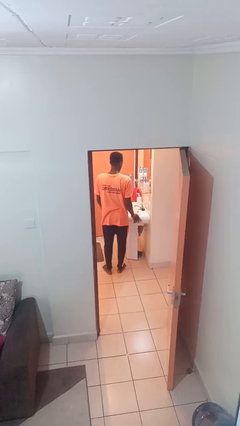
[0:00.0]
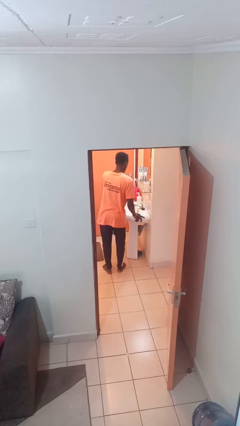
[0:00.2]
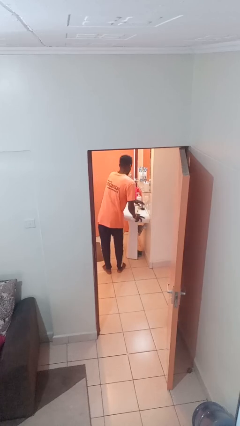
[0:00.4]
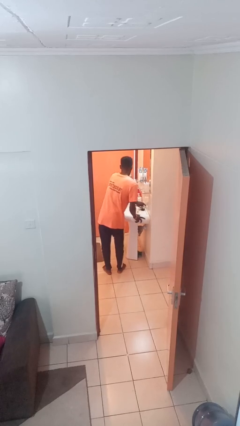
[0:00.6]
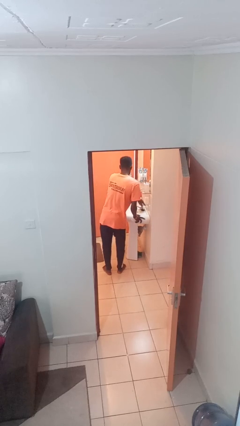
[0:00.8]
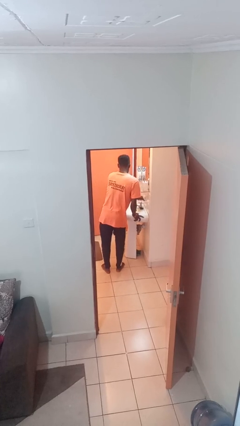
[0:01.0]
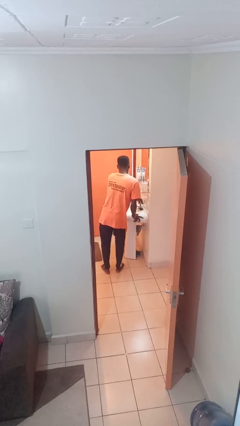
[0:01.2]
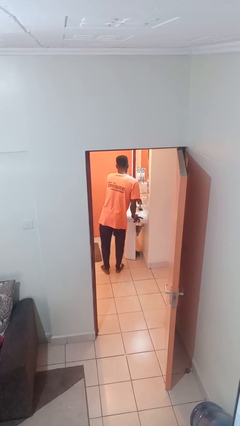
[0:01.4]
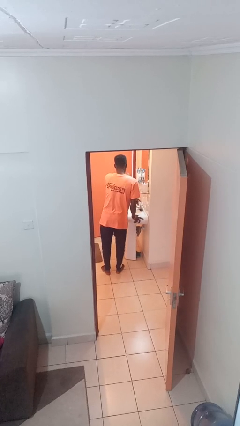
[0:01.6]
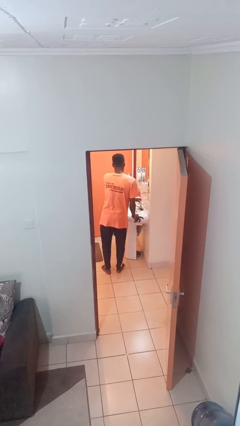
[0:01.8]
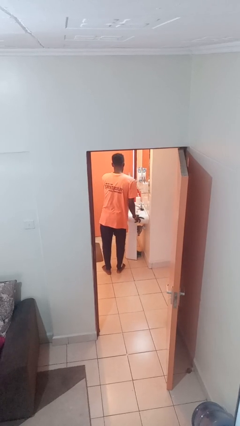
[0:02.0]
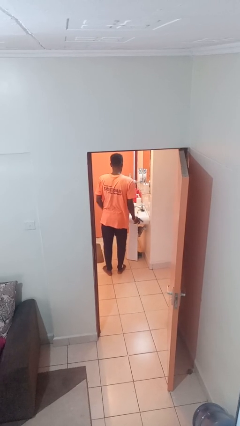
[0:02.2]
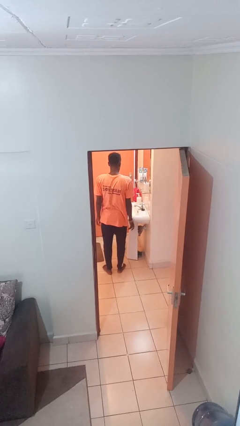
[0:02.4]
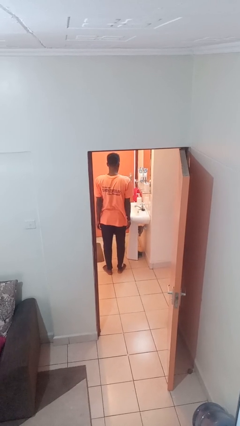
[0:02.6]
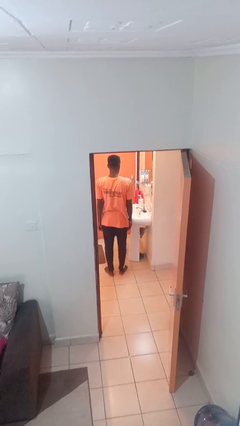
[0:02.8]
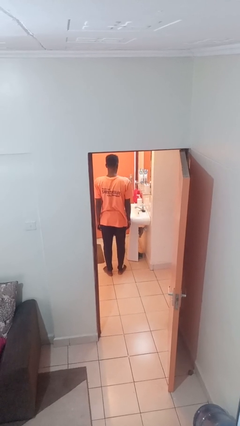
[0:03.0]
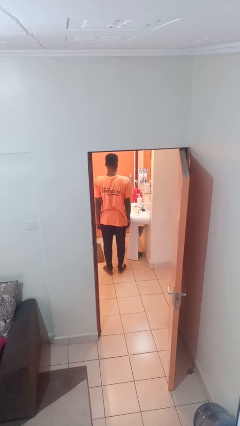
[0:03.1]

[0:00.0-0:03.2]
person turns on faucet

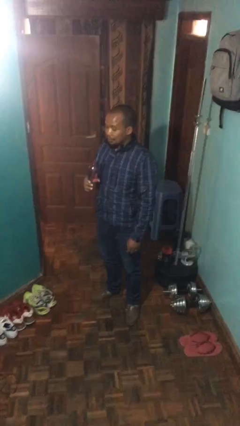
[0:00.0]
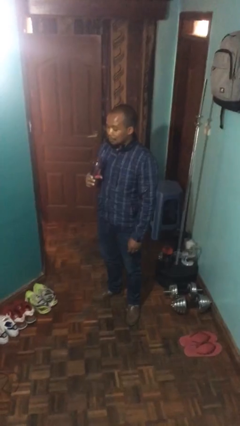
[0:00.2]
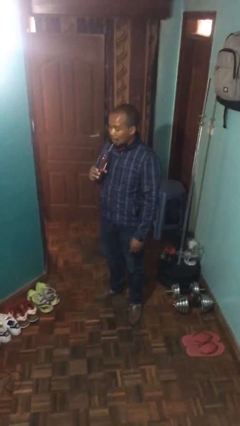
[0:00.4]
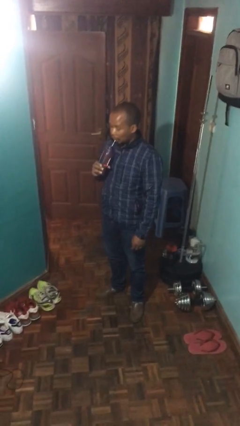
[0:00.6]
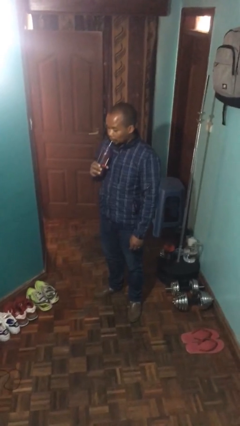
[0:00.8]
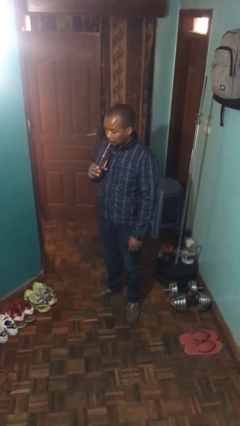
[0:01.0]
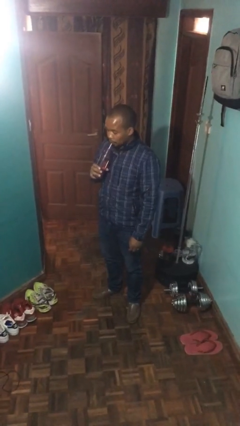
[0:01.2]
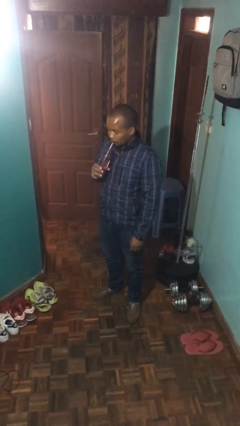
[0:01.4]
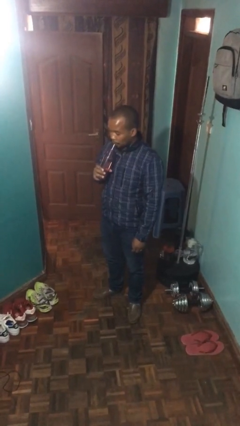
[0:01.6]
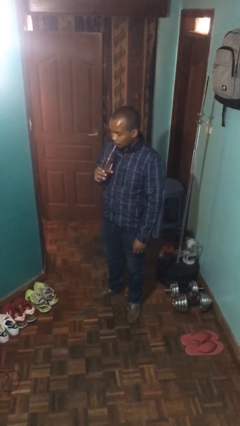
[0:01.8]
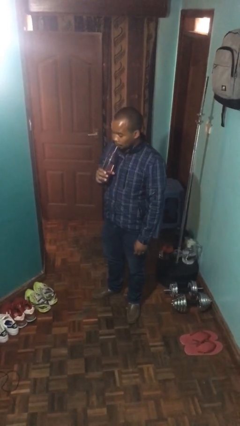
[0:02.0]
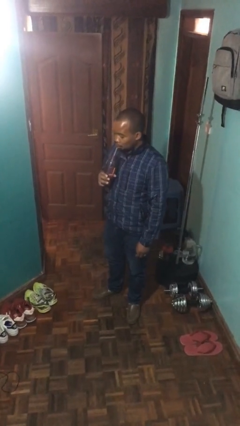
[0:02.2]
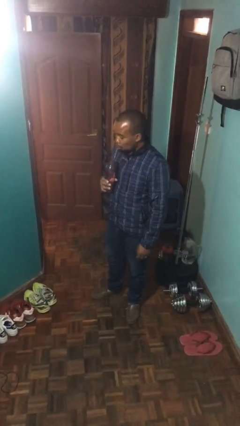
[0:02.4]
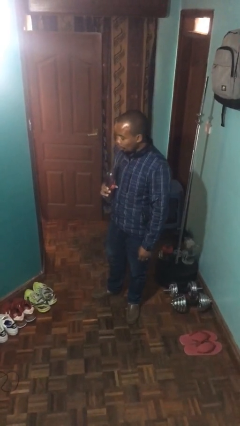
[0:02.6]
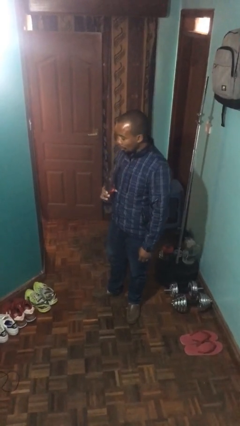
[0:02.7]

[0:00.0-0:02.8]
person drinks from straw

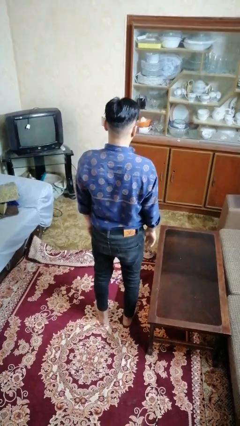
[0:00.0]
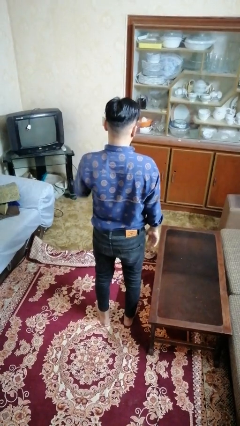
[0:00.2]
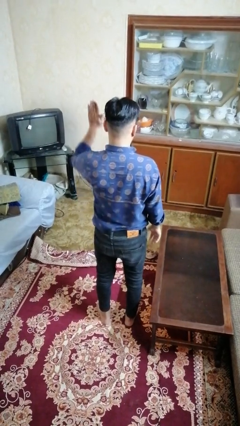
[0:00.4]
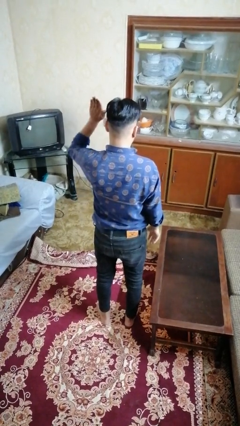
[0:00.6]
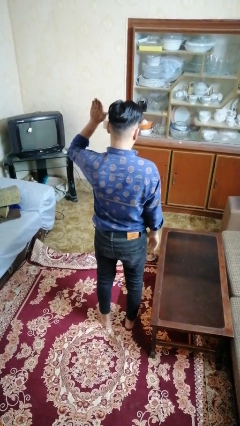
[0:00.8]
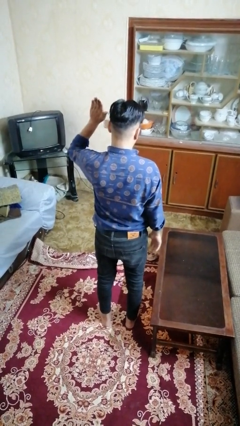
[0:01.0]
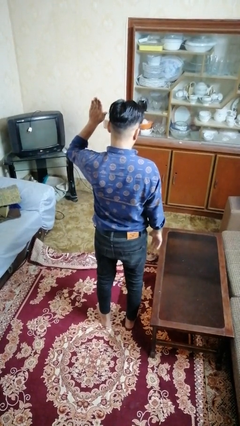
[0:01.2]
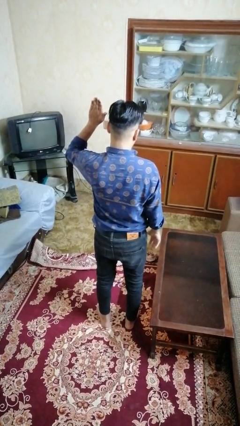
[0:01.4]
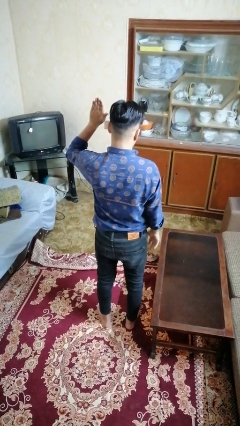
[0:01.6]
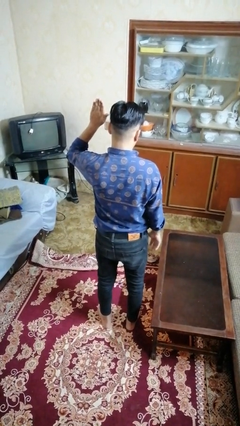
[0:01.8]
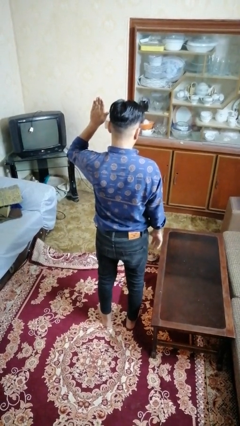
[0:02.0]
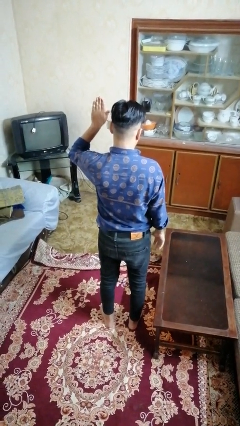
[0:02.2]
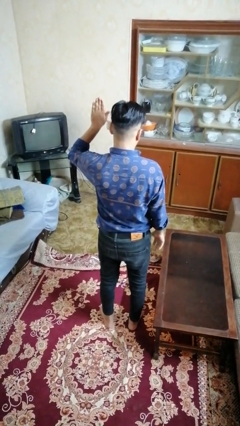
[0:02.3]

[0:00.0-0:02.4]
person gestures number five

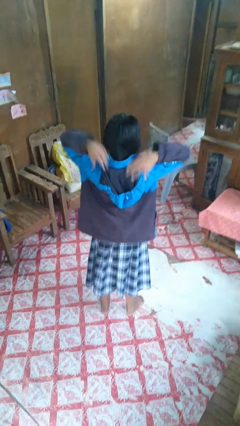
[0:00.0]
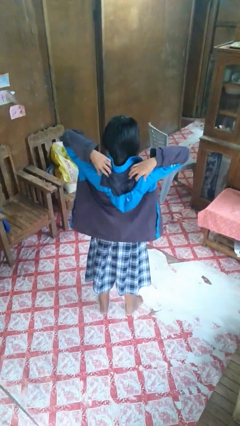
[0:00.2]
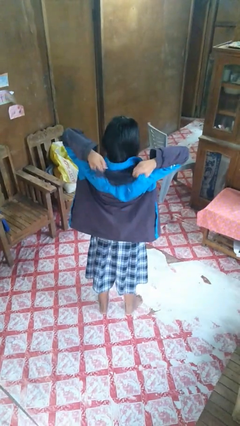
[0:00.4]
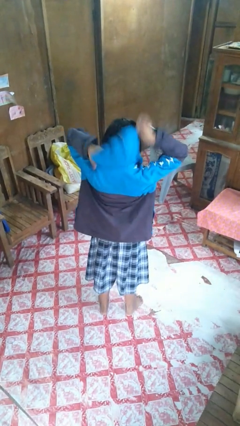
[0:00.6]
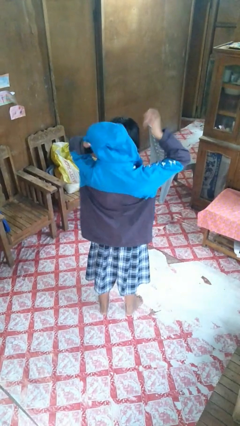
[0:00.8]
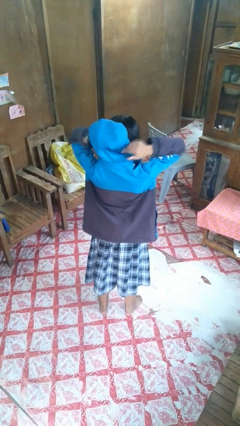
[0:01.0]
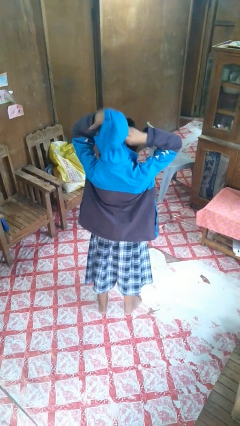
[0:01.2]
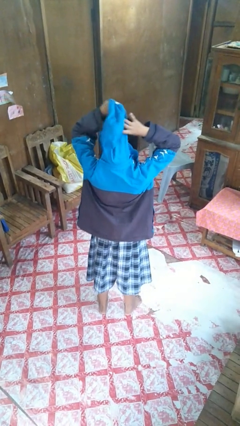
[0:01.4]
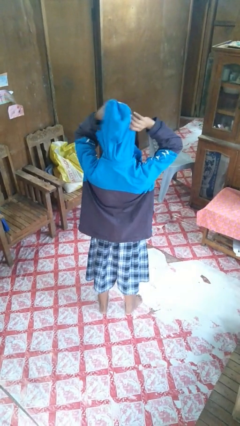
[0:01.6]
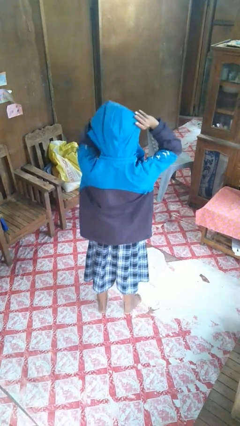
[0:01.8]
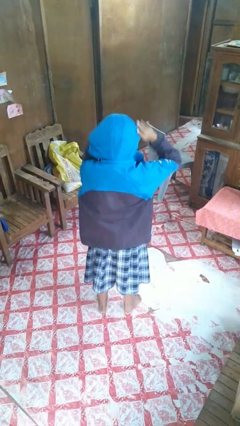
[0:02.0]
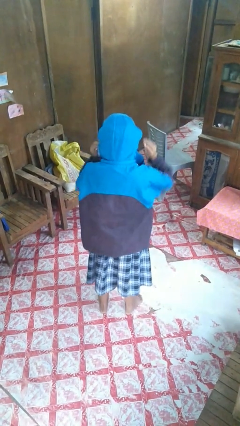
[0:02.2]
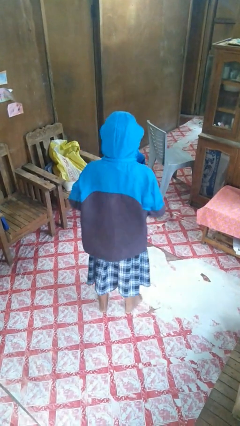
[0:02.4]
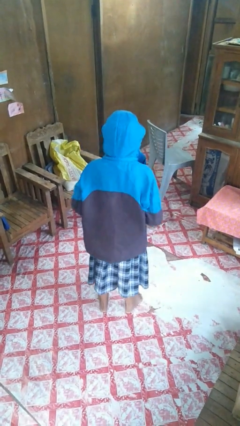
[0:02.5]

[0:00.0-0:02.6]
person puts on hoodie

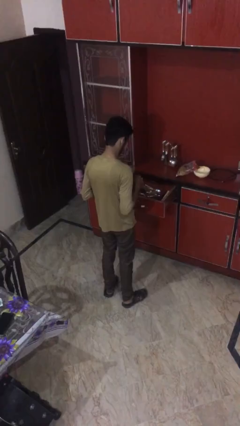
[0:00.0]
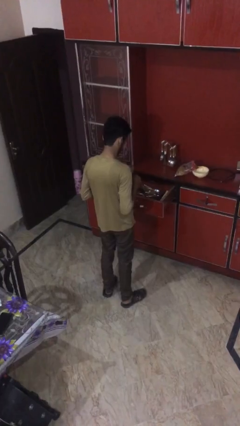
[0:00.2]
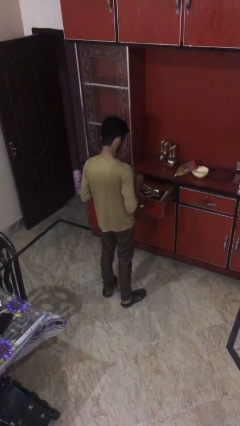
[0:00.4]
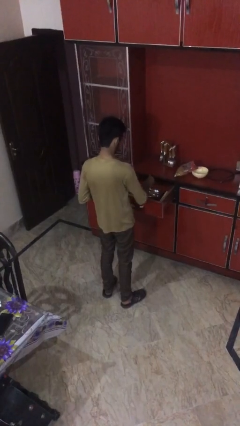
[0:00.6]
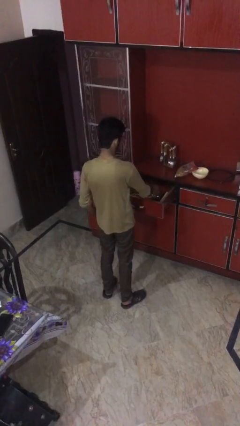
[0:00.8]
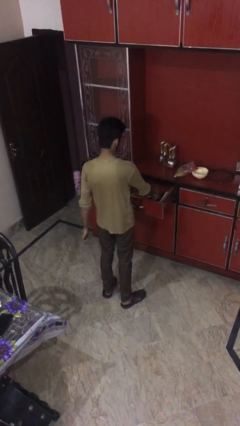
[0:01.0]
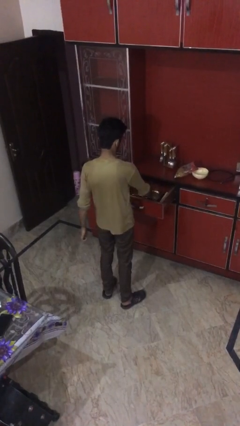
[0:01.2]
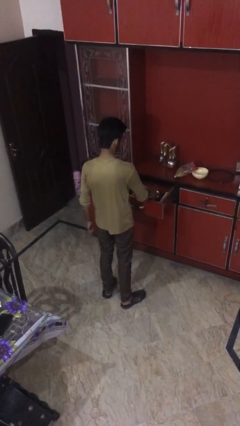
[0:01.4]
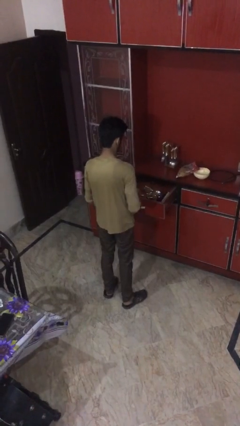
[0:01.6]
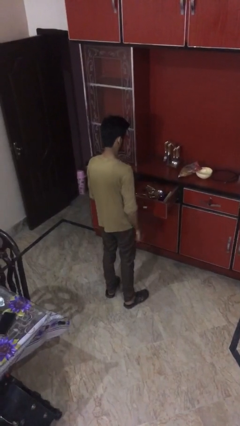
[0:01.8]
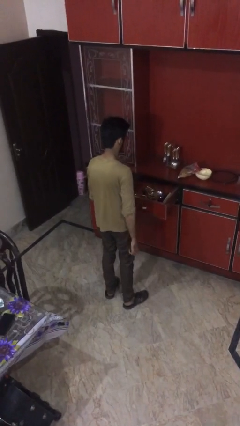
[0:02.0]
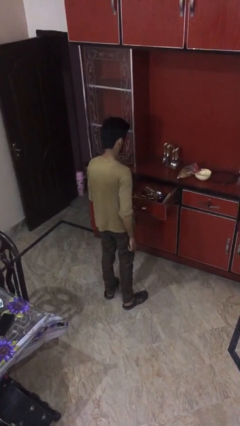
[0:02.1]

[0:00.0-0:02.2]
person puts object into kitchen drawer

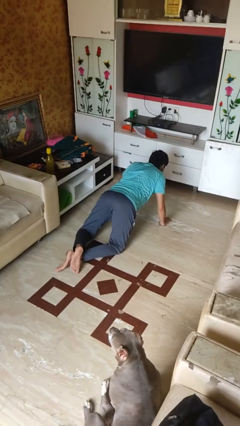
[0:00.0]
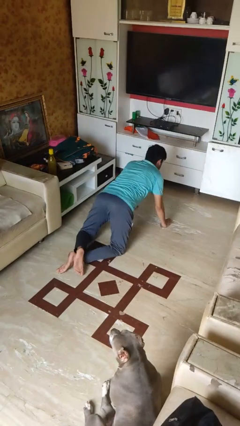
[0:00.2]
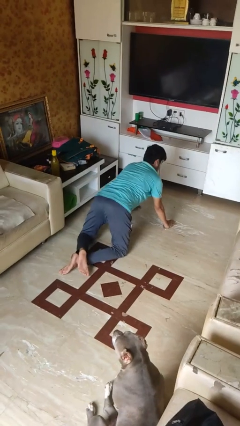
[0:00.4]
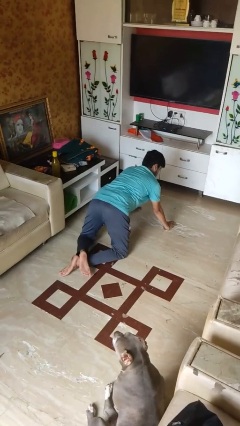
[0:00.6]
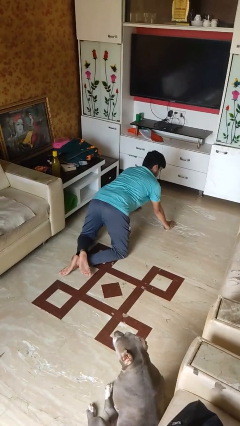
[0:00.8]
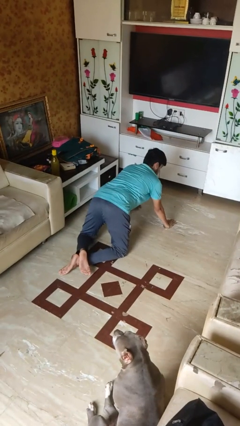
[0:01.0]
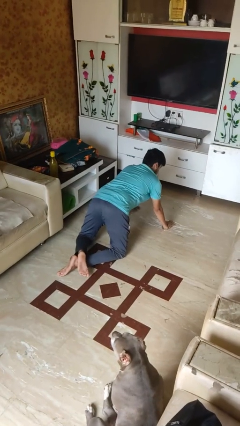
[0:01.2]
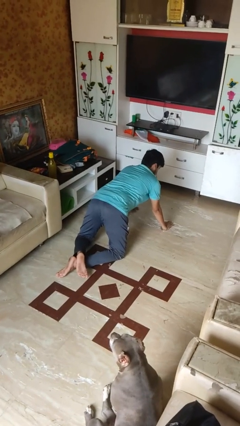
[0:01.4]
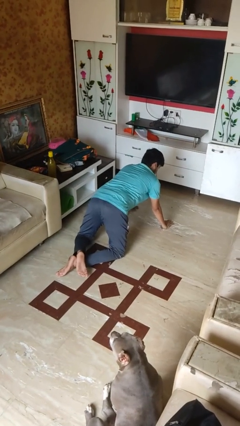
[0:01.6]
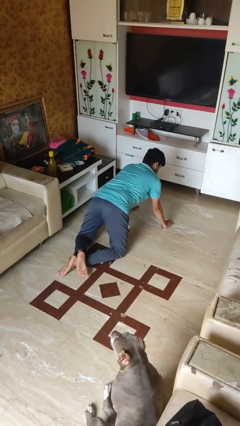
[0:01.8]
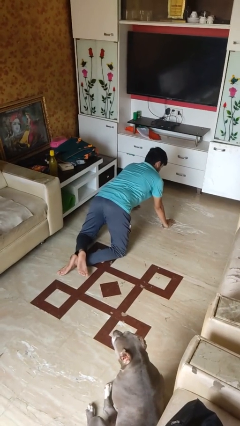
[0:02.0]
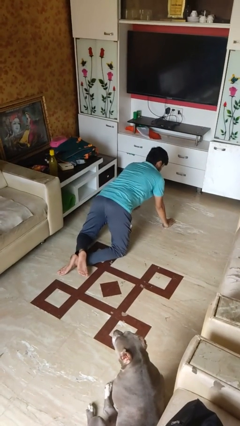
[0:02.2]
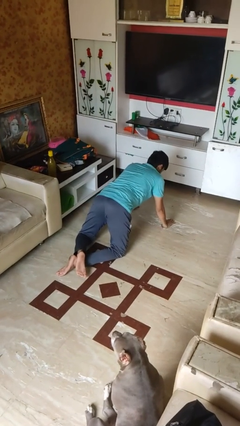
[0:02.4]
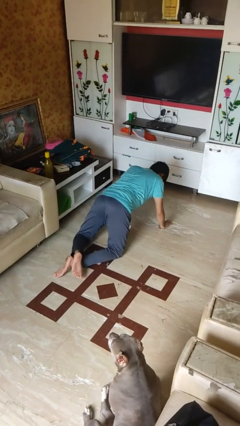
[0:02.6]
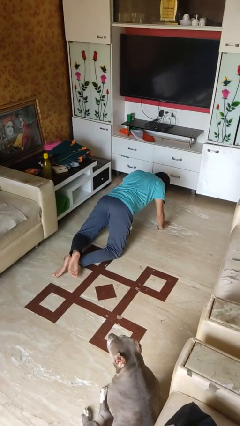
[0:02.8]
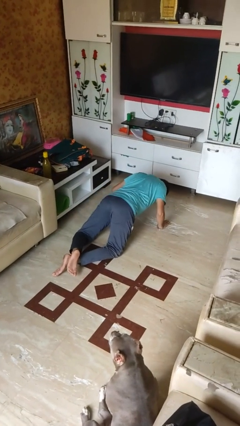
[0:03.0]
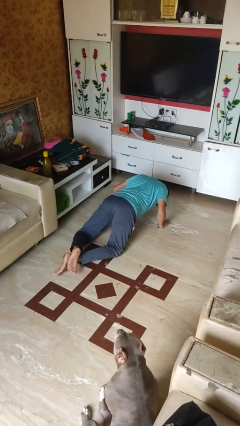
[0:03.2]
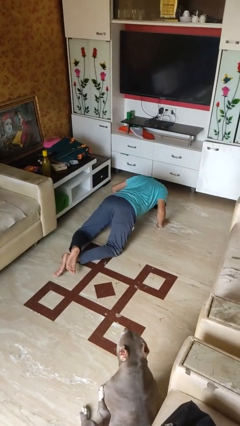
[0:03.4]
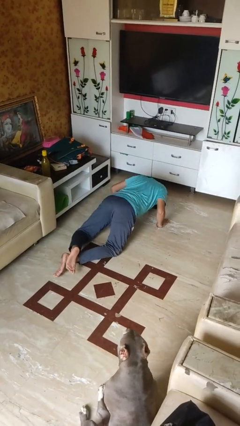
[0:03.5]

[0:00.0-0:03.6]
person exercises with pushup

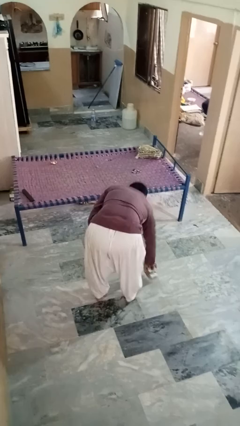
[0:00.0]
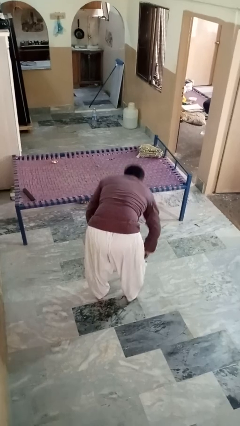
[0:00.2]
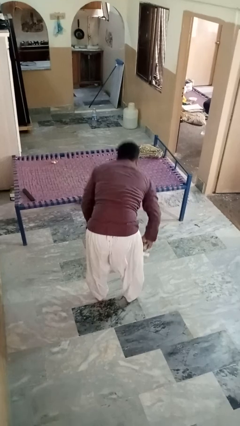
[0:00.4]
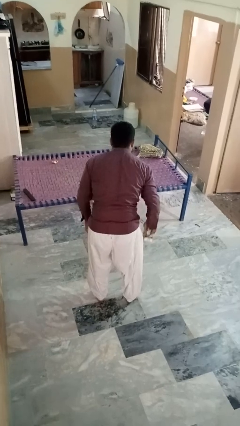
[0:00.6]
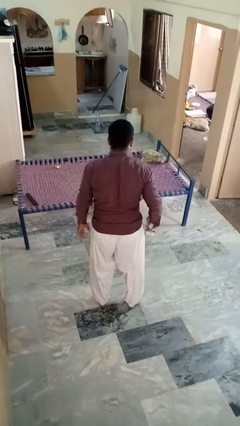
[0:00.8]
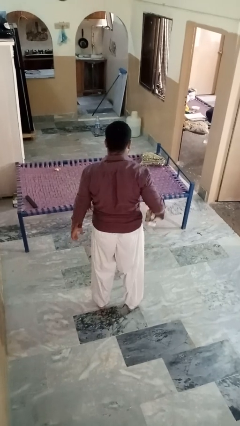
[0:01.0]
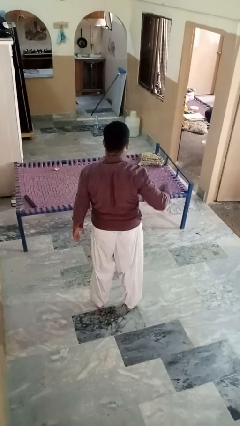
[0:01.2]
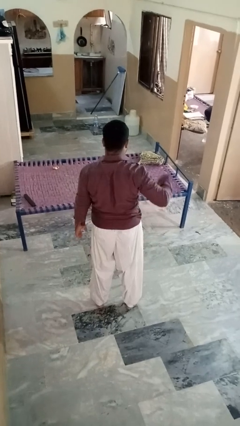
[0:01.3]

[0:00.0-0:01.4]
person picks up object from floor
